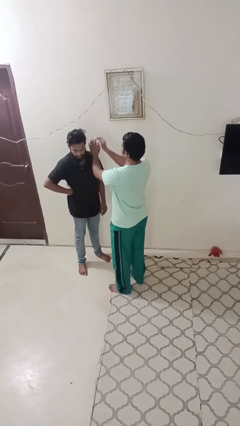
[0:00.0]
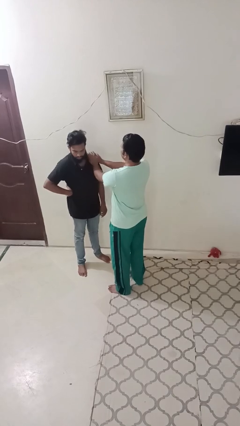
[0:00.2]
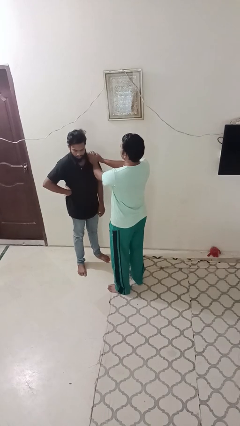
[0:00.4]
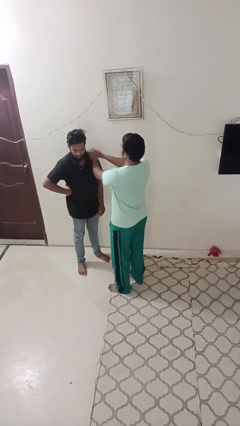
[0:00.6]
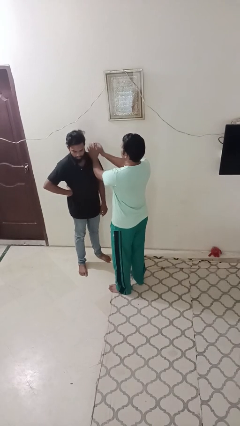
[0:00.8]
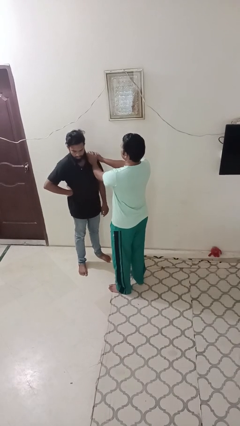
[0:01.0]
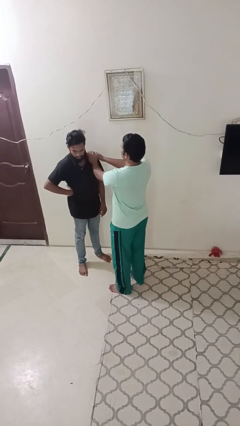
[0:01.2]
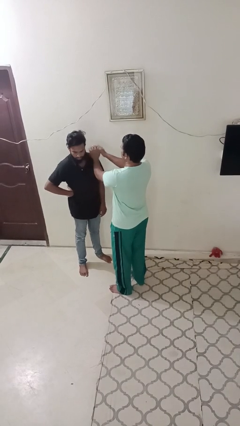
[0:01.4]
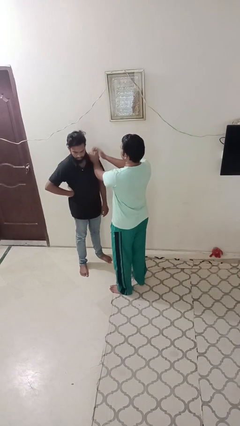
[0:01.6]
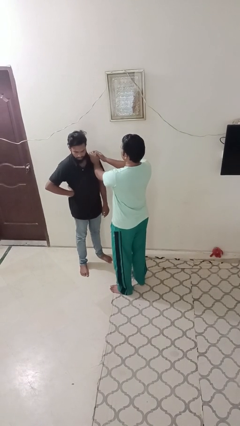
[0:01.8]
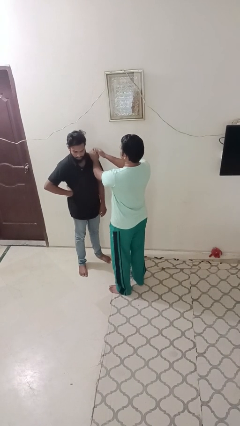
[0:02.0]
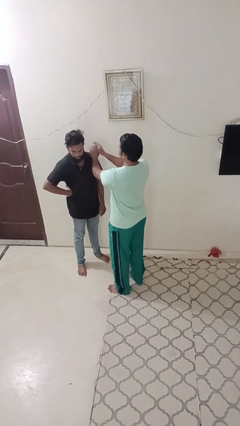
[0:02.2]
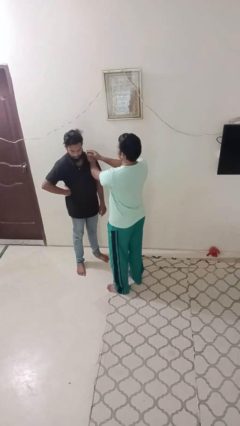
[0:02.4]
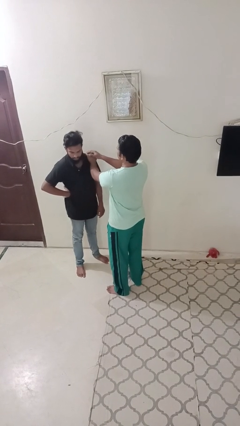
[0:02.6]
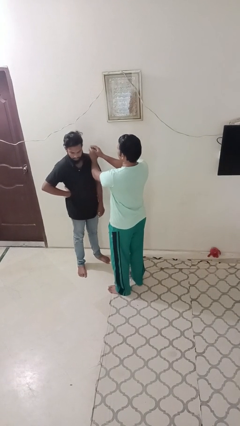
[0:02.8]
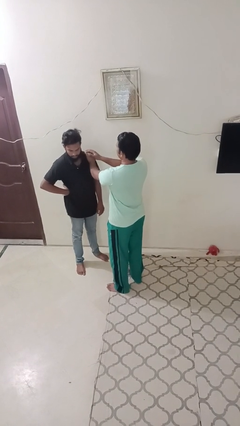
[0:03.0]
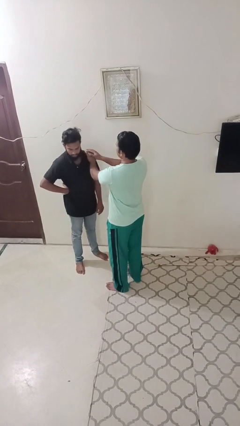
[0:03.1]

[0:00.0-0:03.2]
person pounds shoulders of person

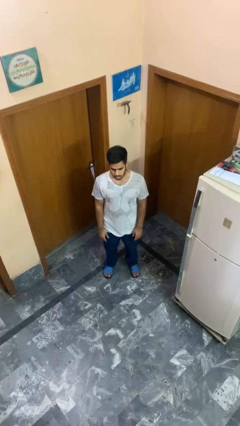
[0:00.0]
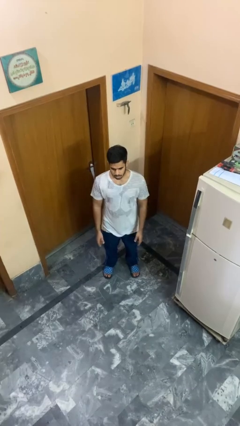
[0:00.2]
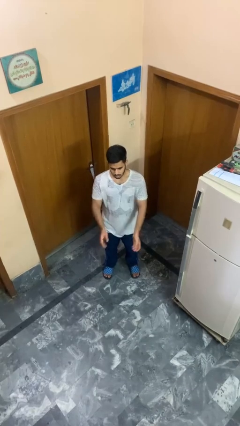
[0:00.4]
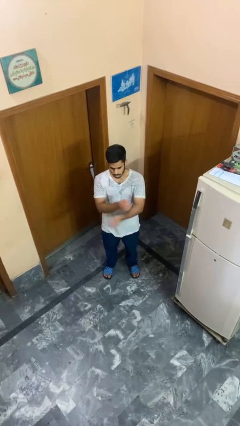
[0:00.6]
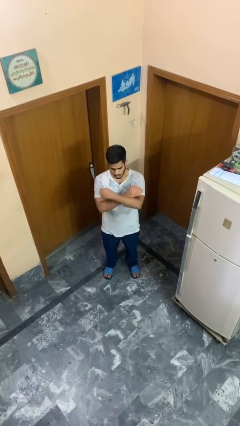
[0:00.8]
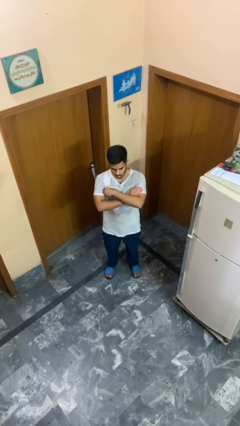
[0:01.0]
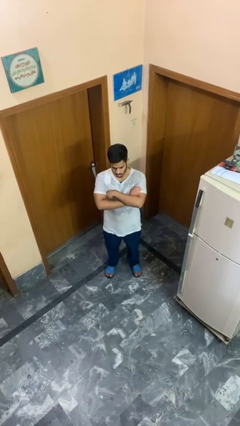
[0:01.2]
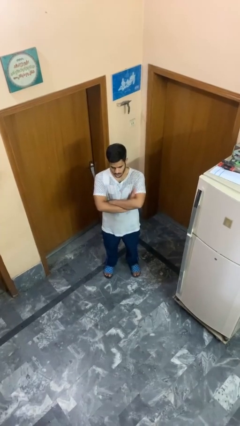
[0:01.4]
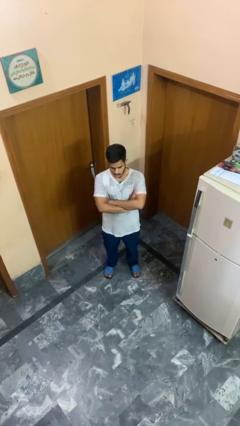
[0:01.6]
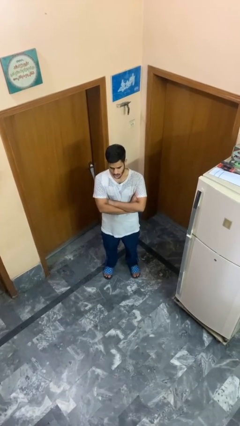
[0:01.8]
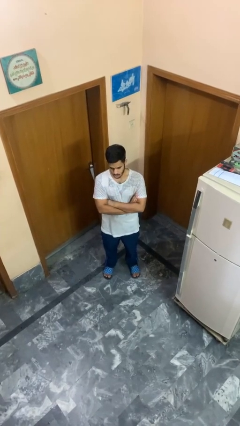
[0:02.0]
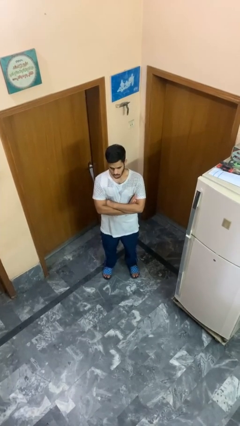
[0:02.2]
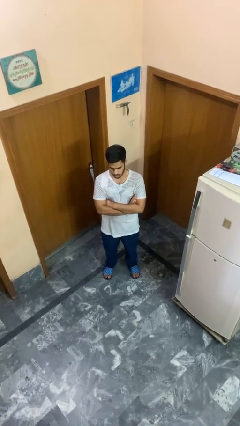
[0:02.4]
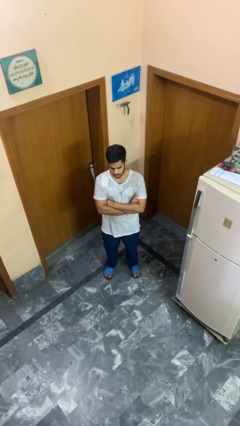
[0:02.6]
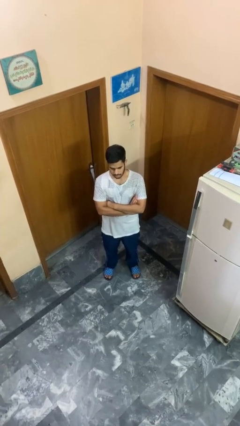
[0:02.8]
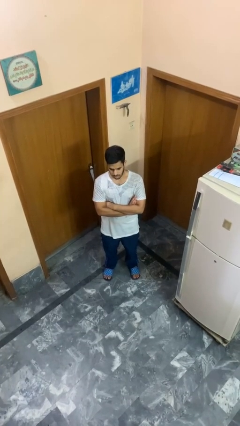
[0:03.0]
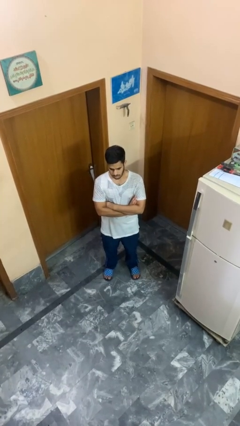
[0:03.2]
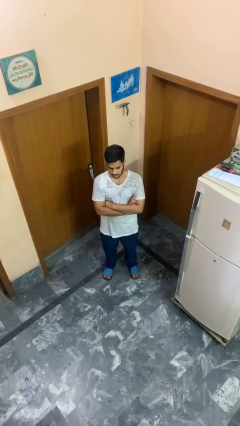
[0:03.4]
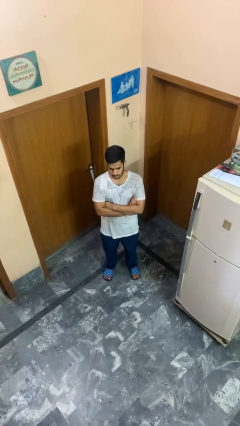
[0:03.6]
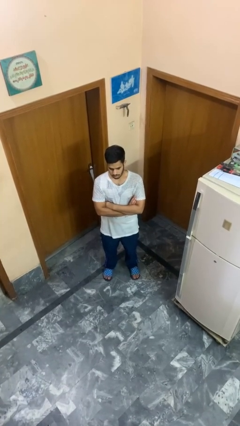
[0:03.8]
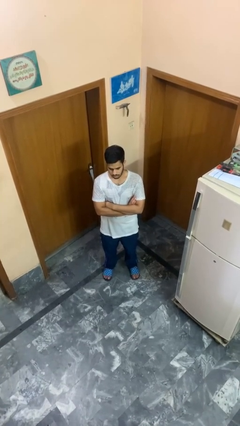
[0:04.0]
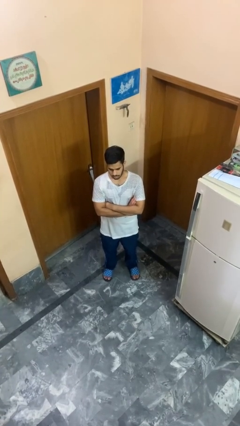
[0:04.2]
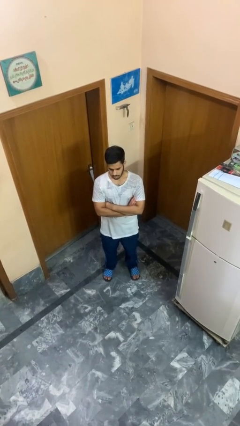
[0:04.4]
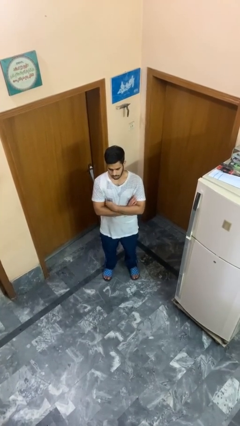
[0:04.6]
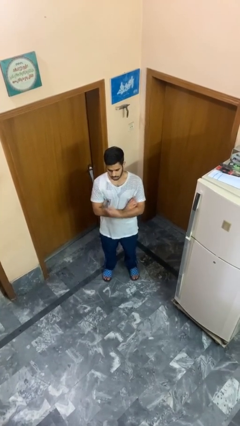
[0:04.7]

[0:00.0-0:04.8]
person crosses arms

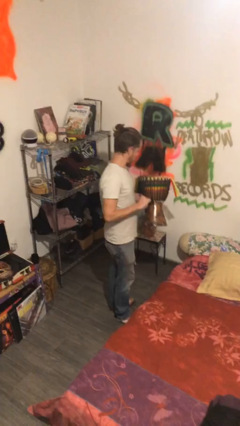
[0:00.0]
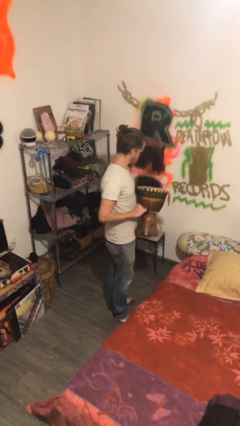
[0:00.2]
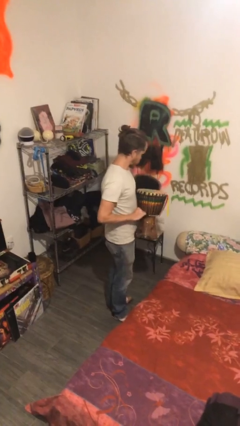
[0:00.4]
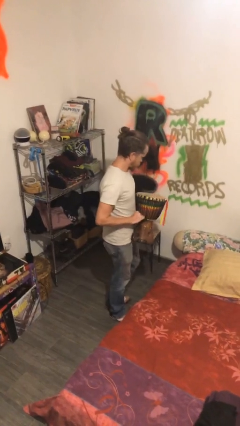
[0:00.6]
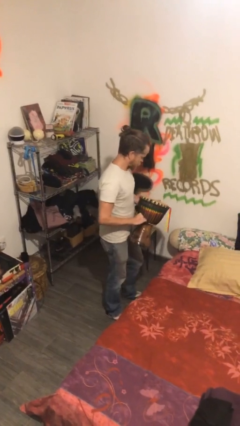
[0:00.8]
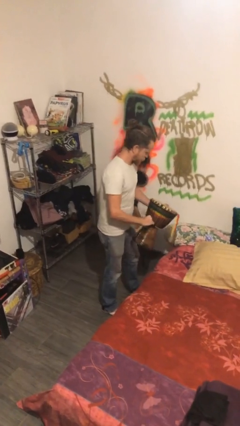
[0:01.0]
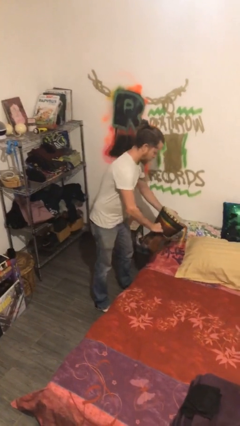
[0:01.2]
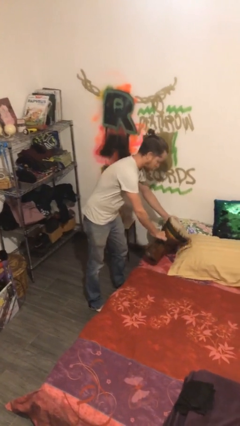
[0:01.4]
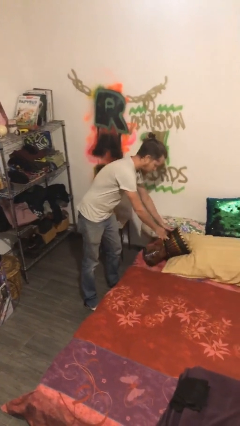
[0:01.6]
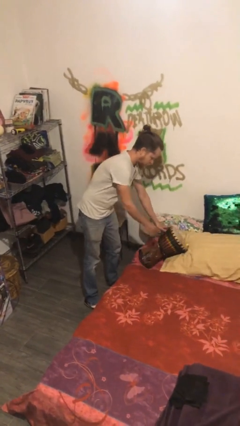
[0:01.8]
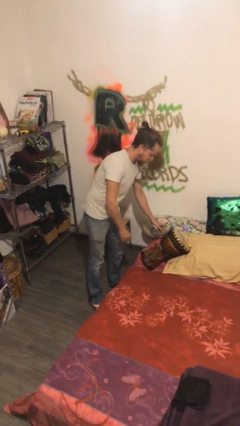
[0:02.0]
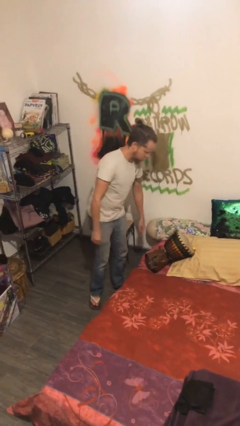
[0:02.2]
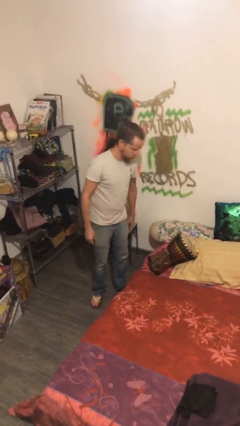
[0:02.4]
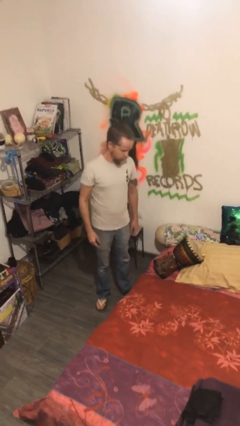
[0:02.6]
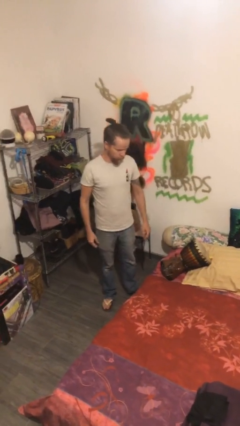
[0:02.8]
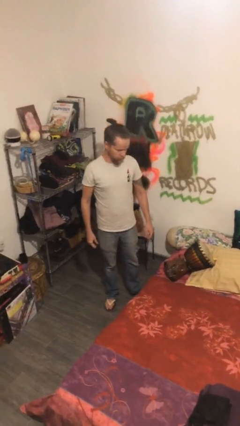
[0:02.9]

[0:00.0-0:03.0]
person puts down object on bed

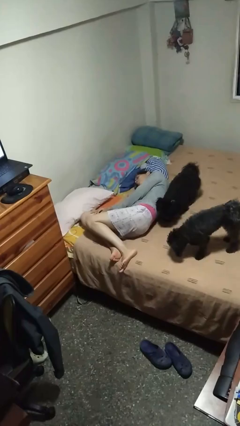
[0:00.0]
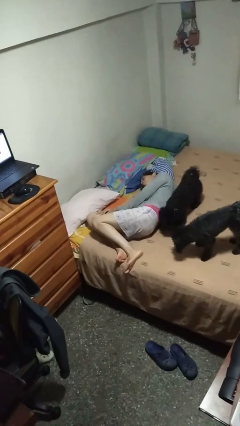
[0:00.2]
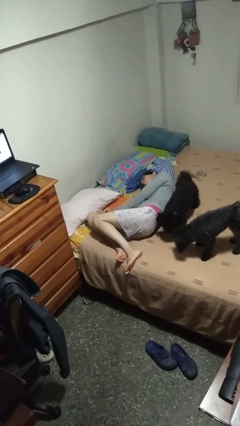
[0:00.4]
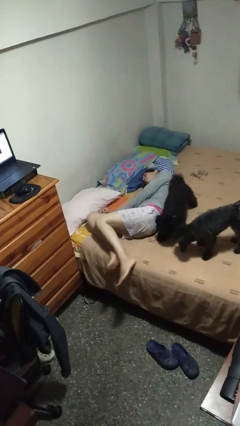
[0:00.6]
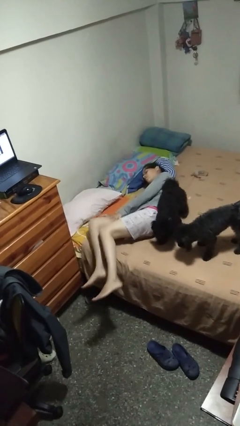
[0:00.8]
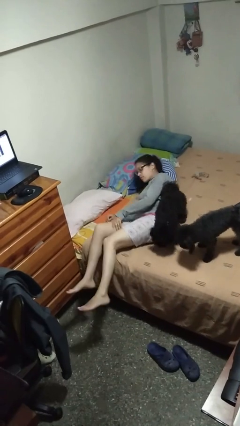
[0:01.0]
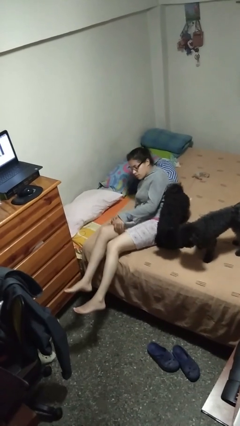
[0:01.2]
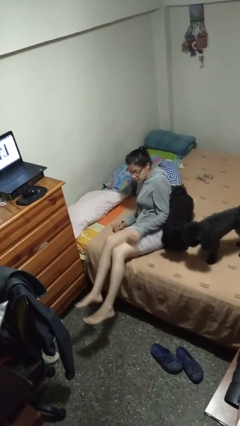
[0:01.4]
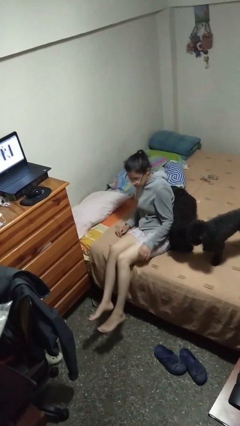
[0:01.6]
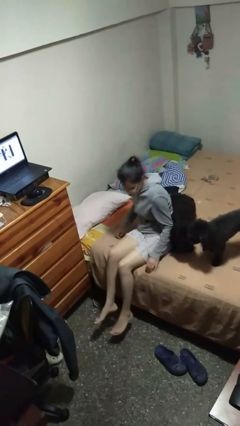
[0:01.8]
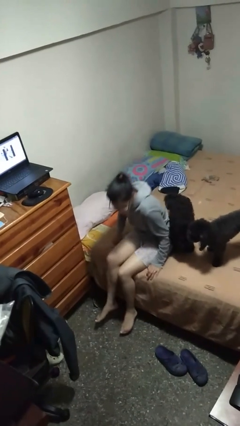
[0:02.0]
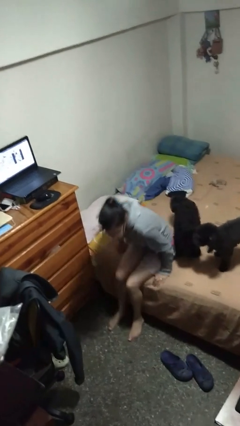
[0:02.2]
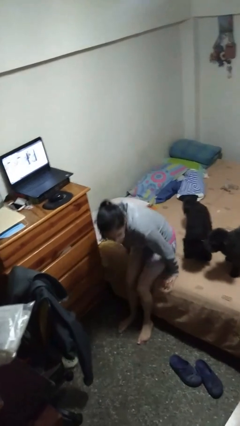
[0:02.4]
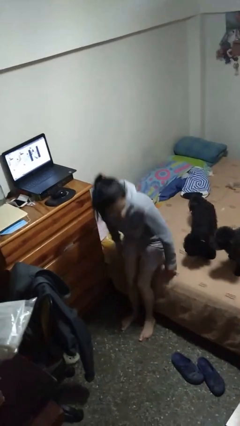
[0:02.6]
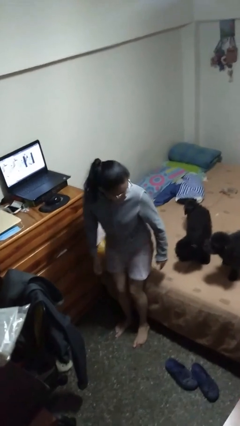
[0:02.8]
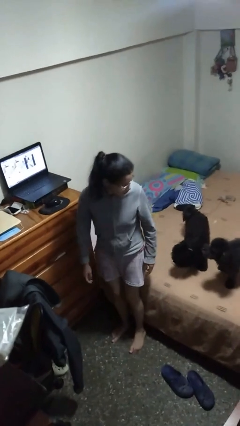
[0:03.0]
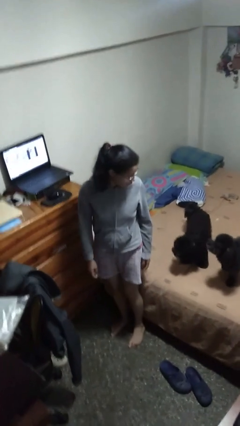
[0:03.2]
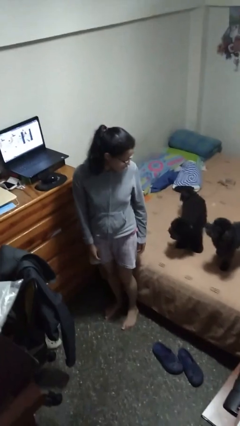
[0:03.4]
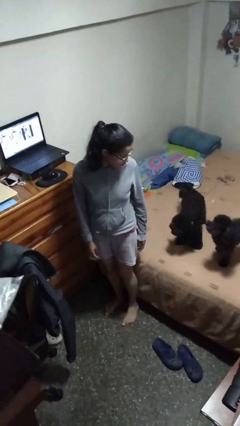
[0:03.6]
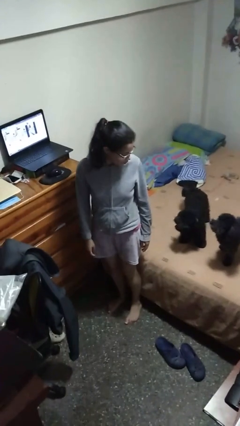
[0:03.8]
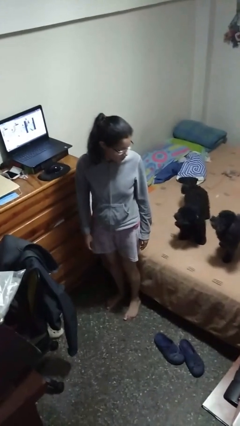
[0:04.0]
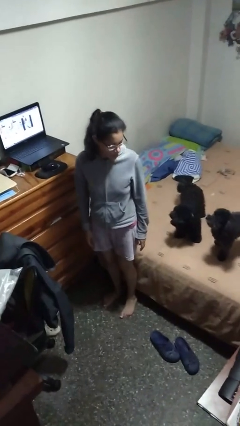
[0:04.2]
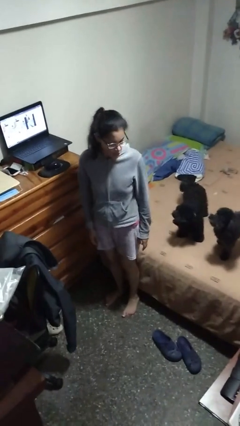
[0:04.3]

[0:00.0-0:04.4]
person stands up

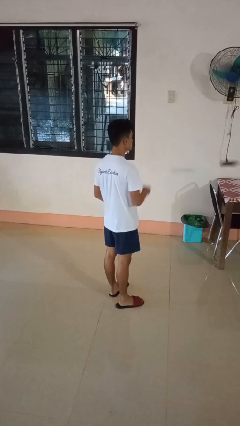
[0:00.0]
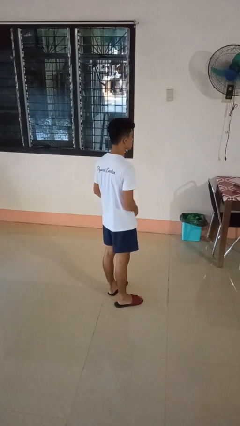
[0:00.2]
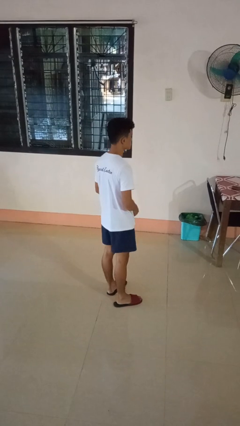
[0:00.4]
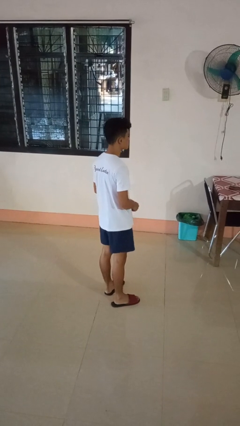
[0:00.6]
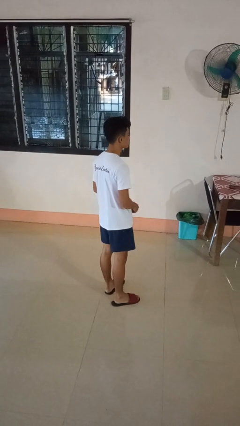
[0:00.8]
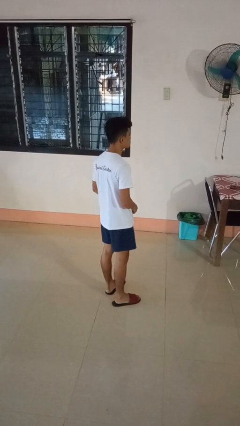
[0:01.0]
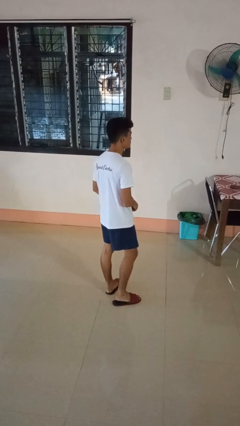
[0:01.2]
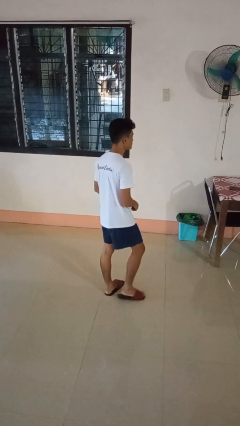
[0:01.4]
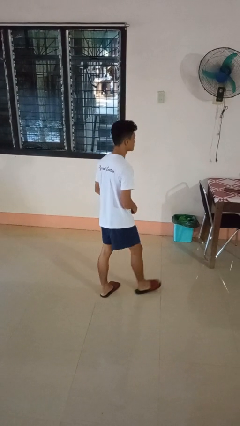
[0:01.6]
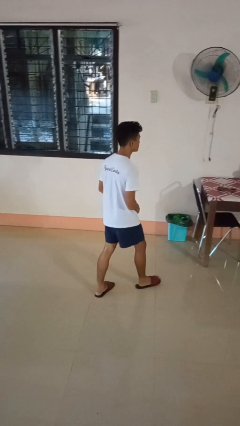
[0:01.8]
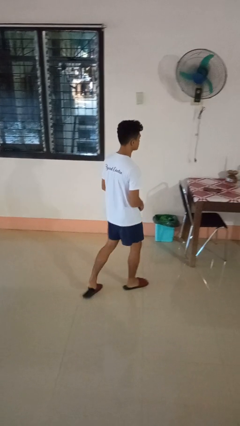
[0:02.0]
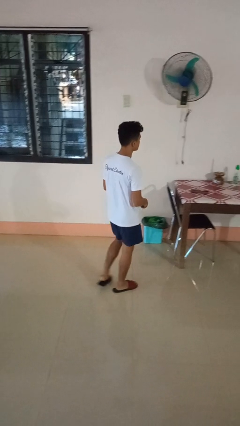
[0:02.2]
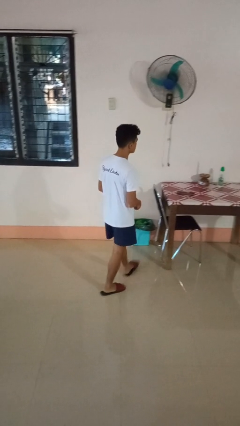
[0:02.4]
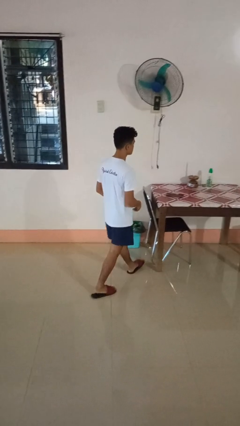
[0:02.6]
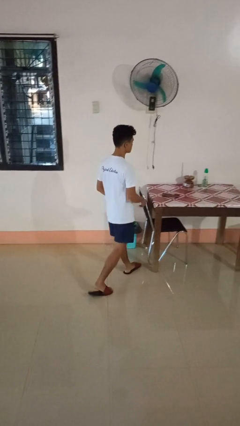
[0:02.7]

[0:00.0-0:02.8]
person throws object on table
